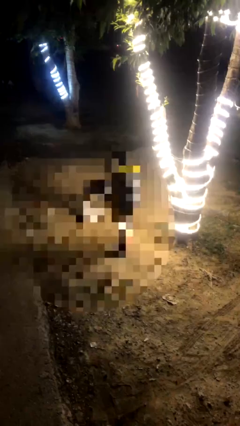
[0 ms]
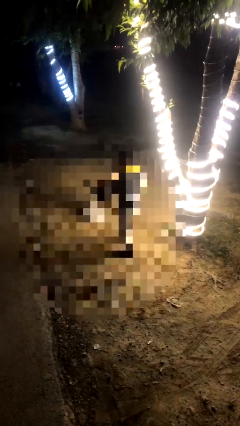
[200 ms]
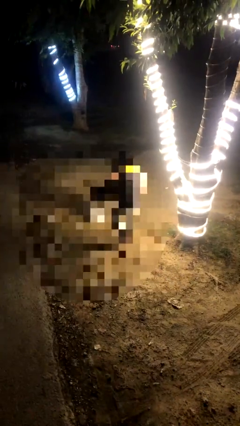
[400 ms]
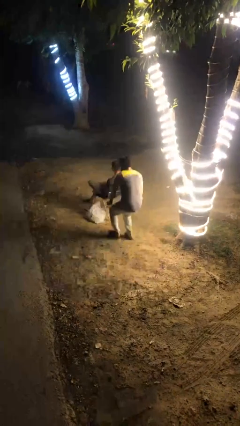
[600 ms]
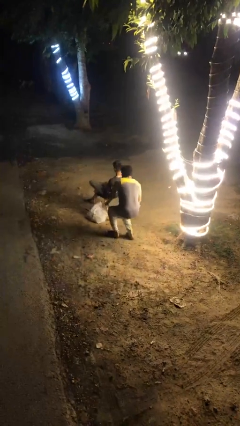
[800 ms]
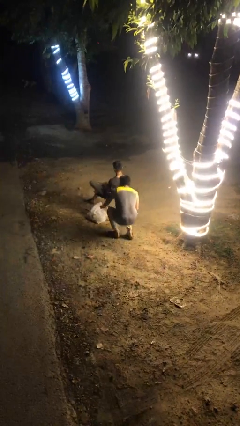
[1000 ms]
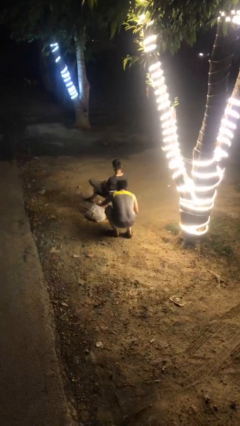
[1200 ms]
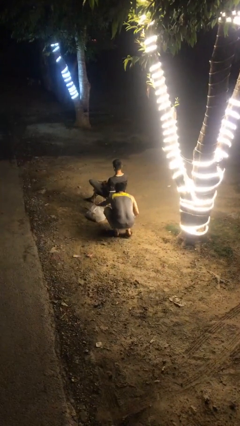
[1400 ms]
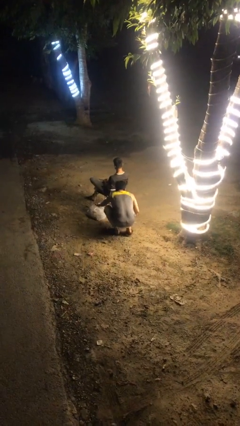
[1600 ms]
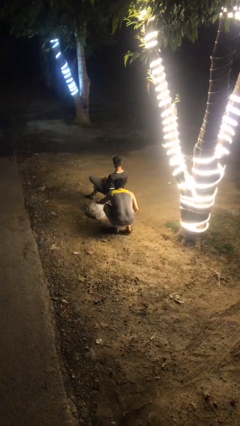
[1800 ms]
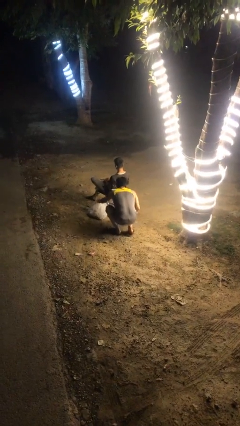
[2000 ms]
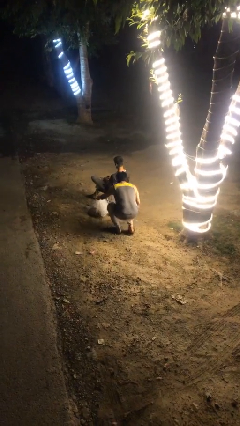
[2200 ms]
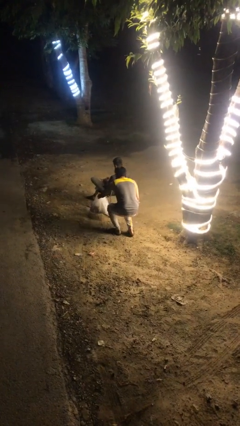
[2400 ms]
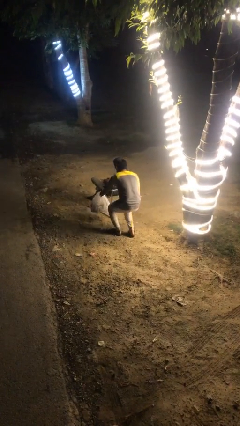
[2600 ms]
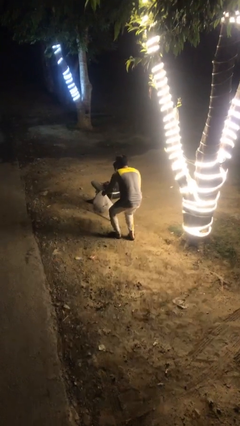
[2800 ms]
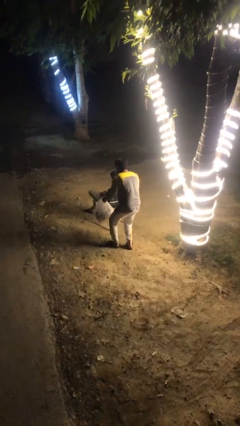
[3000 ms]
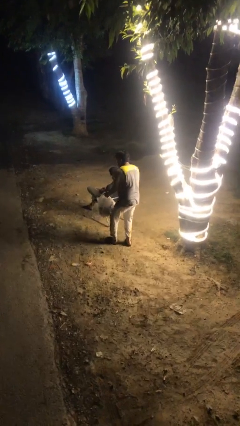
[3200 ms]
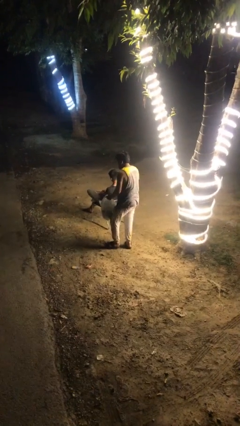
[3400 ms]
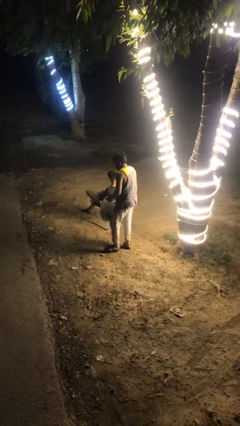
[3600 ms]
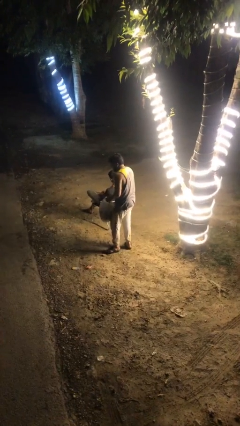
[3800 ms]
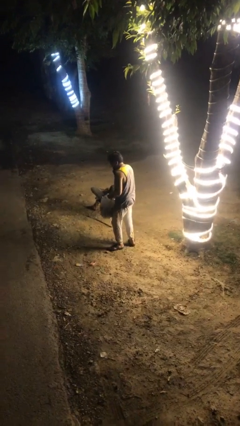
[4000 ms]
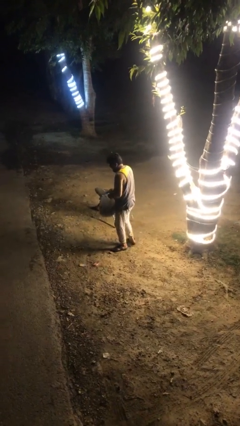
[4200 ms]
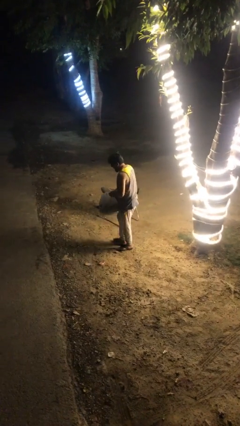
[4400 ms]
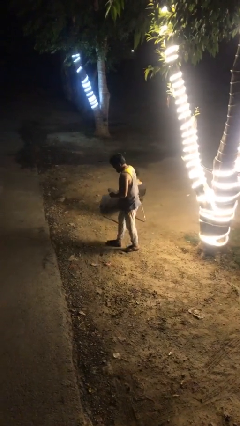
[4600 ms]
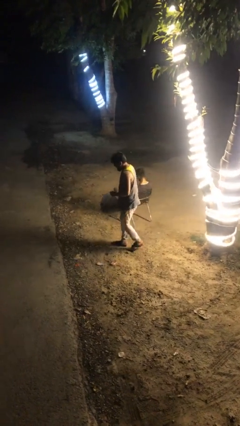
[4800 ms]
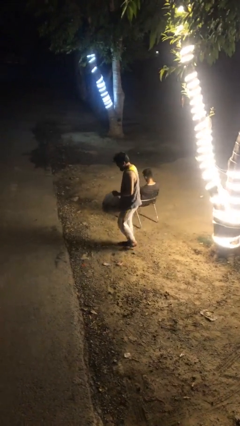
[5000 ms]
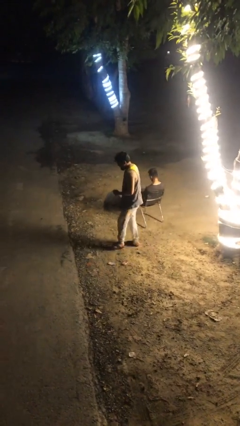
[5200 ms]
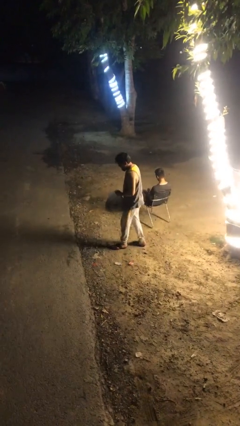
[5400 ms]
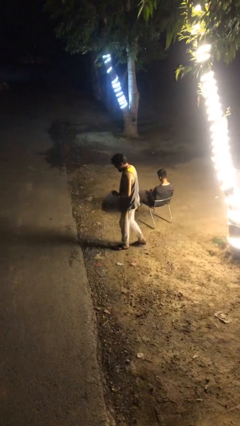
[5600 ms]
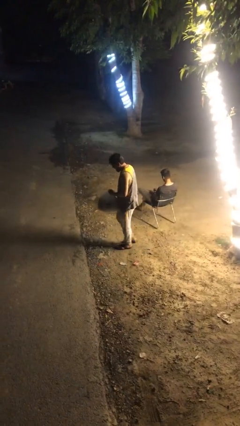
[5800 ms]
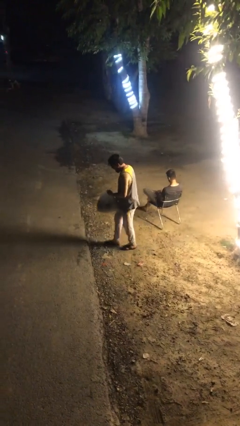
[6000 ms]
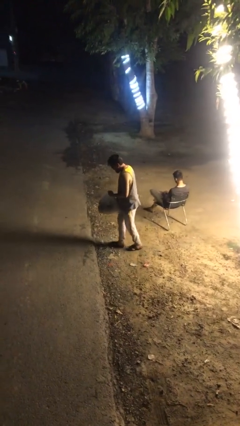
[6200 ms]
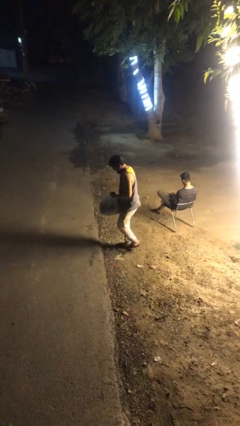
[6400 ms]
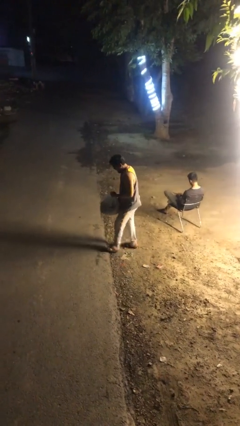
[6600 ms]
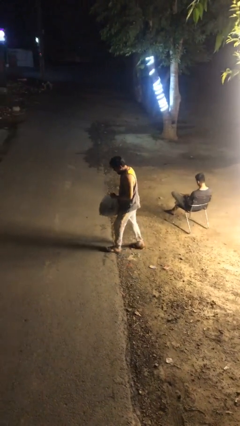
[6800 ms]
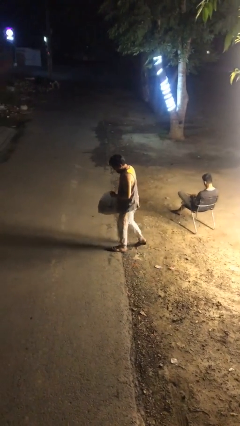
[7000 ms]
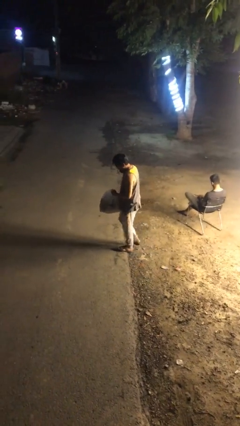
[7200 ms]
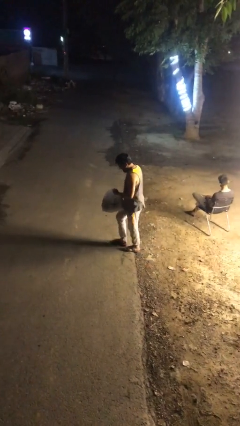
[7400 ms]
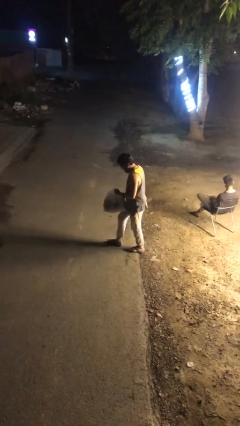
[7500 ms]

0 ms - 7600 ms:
person steals object from person

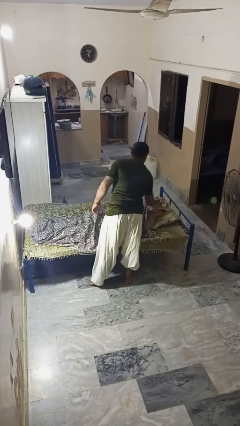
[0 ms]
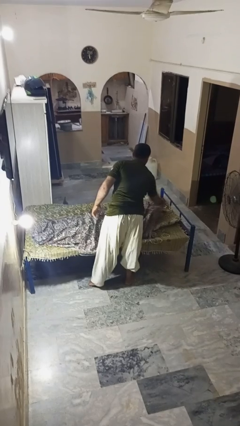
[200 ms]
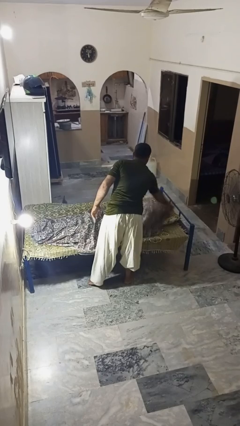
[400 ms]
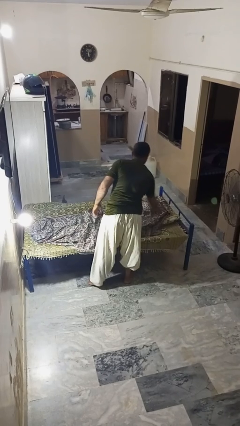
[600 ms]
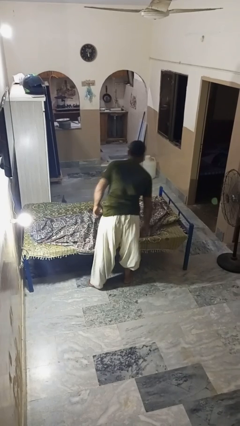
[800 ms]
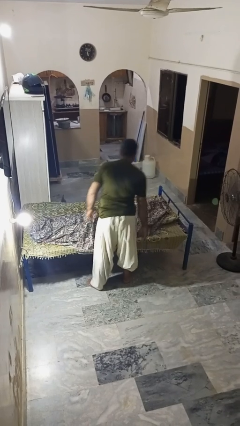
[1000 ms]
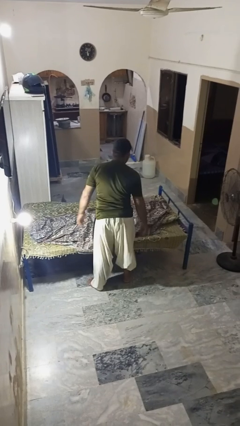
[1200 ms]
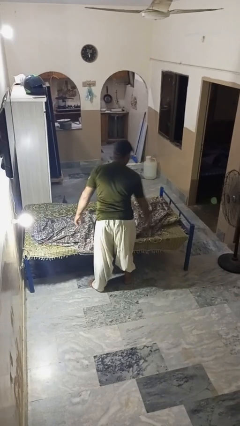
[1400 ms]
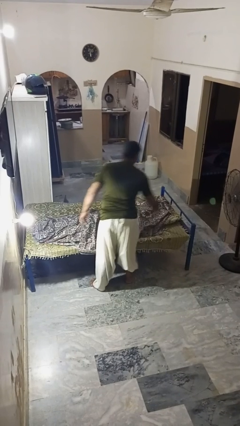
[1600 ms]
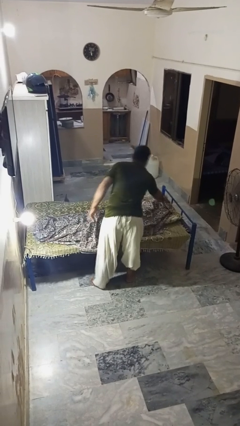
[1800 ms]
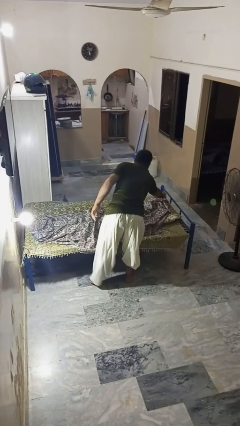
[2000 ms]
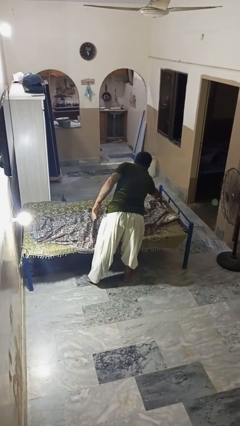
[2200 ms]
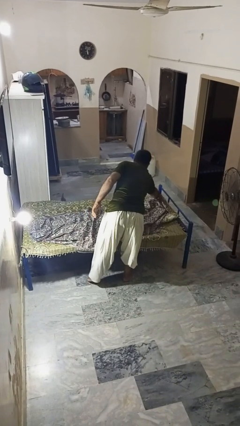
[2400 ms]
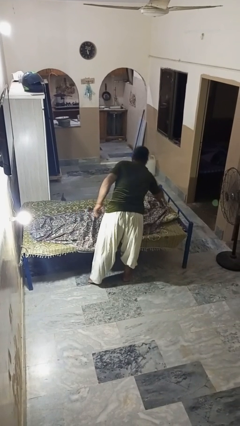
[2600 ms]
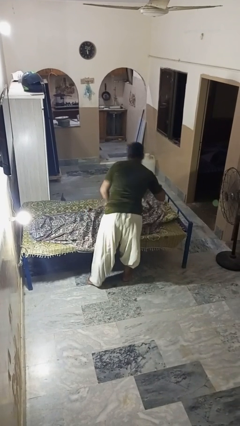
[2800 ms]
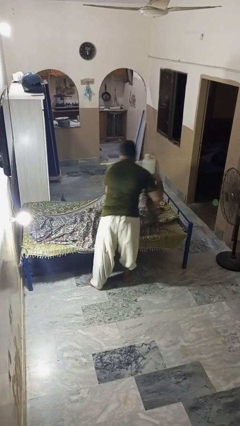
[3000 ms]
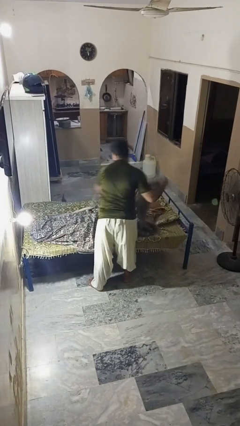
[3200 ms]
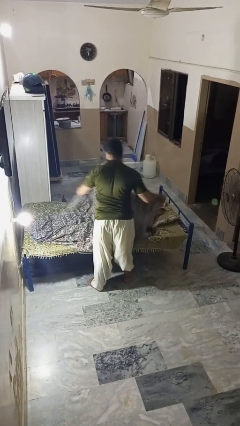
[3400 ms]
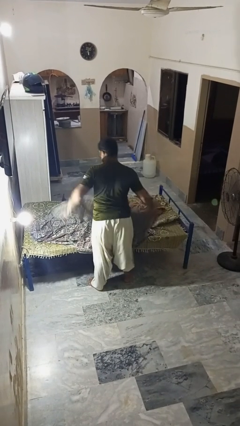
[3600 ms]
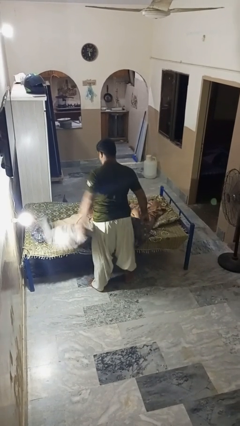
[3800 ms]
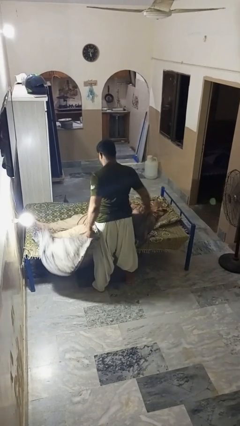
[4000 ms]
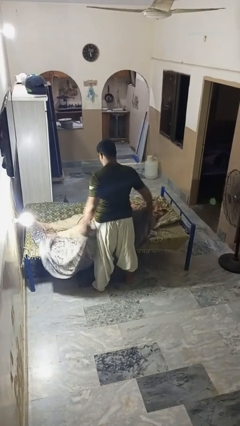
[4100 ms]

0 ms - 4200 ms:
person uncovers friend with blanket

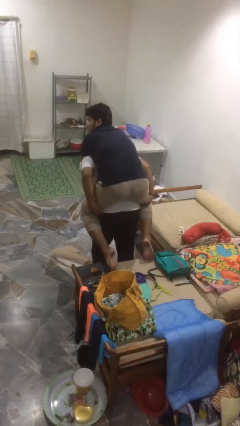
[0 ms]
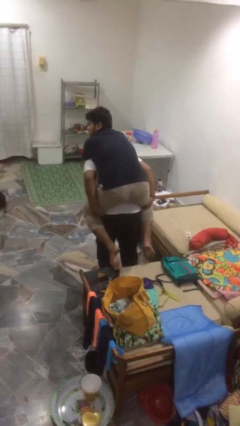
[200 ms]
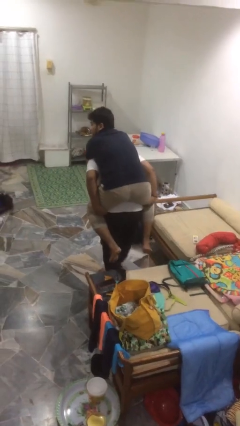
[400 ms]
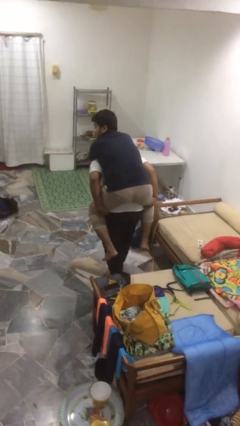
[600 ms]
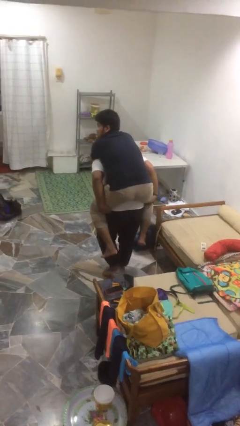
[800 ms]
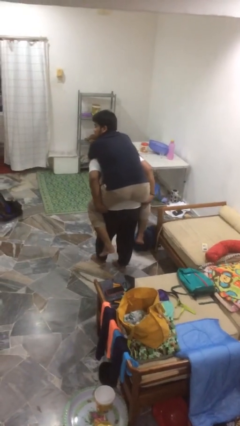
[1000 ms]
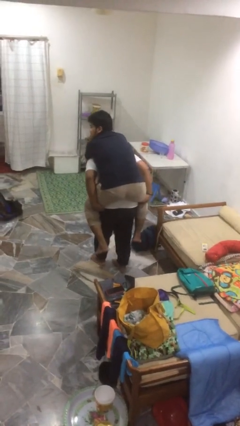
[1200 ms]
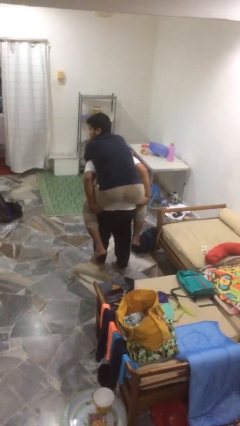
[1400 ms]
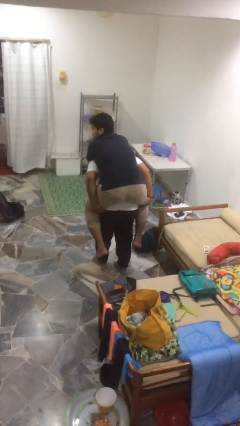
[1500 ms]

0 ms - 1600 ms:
person carries person on back

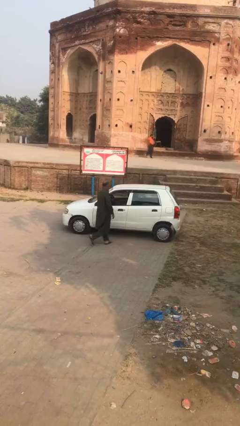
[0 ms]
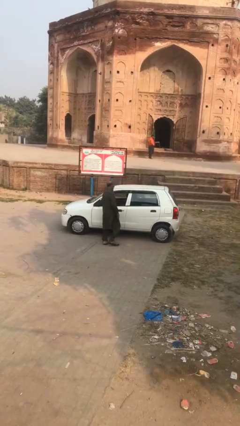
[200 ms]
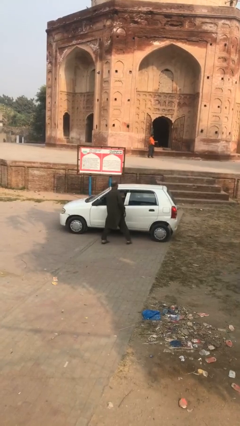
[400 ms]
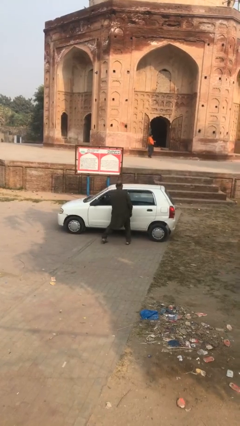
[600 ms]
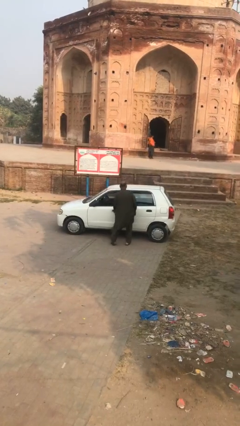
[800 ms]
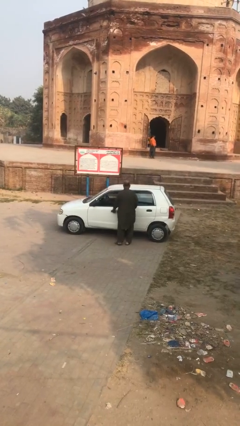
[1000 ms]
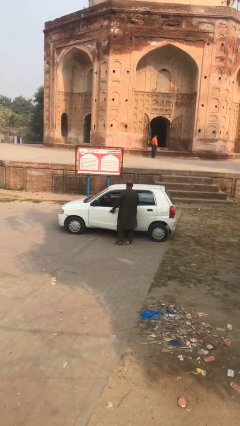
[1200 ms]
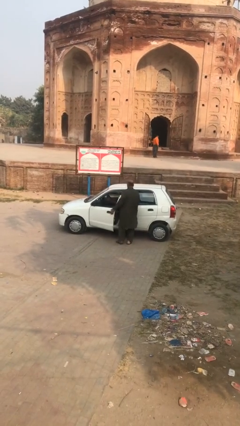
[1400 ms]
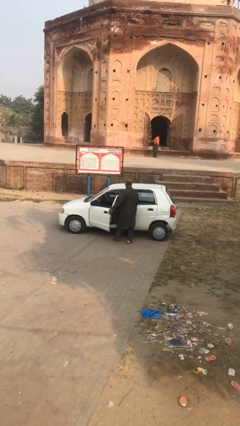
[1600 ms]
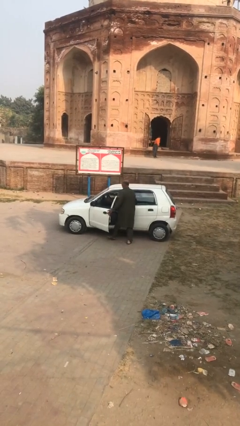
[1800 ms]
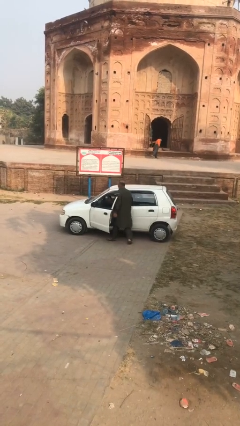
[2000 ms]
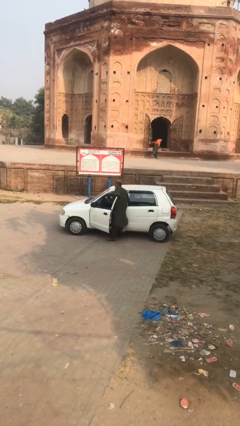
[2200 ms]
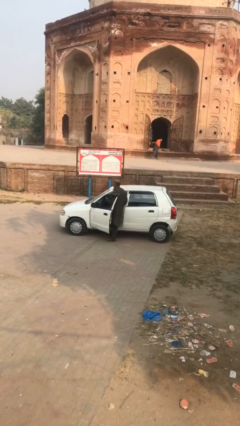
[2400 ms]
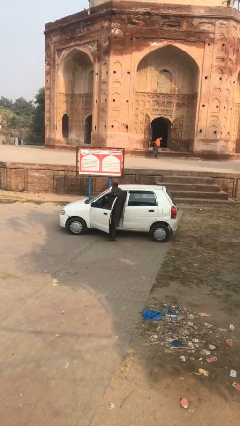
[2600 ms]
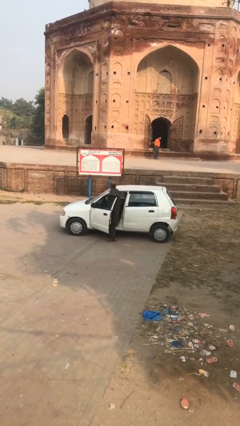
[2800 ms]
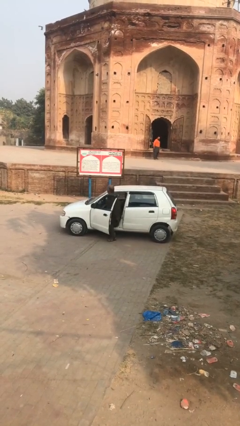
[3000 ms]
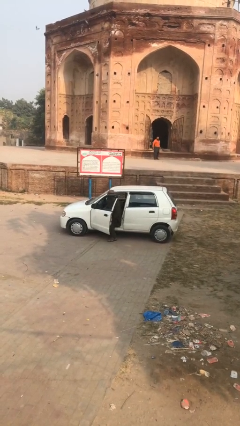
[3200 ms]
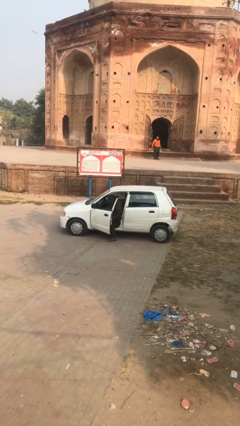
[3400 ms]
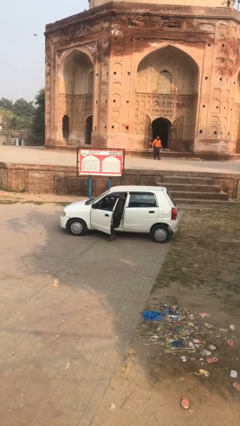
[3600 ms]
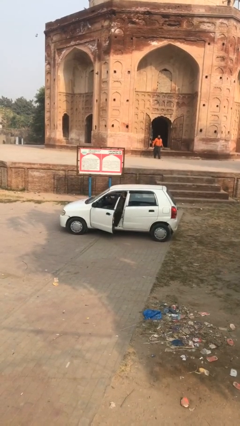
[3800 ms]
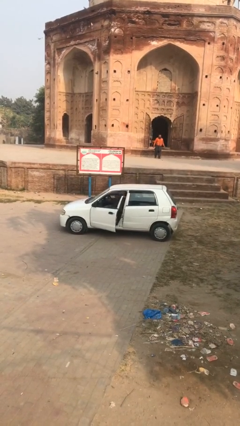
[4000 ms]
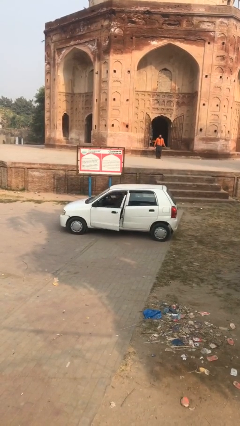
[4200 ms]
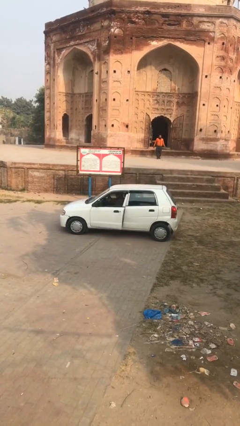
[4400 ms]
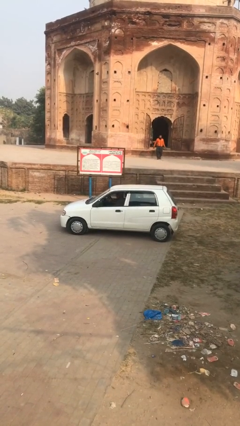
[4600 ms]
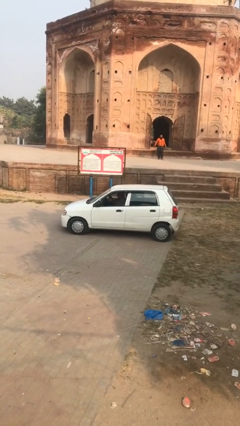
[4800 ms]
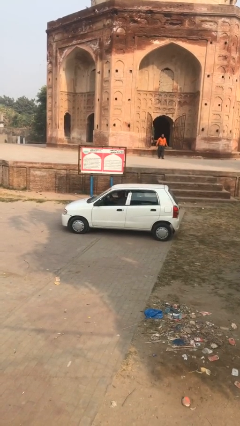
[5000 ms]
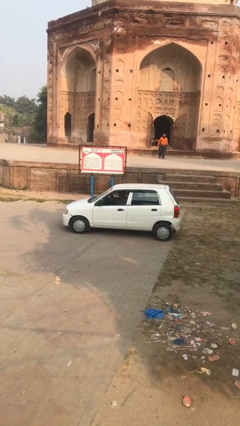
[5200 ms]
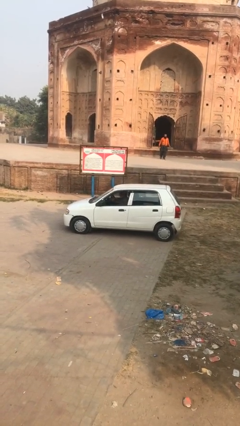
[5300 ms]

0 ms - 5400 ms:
car picks up person
